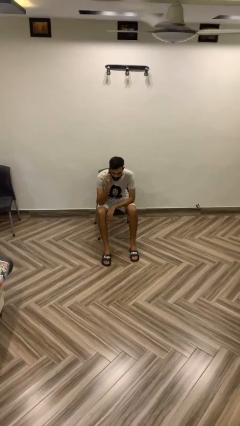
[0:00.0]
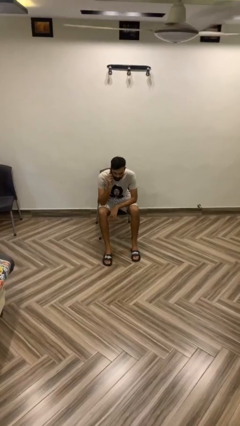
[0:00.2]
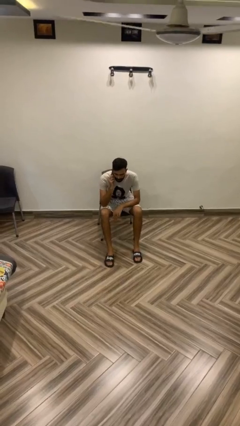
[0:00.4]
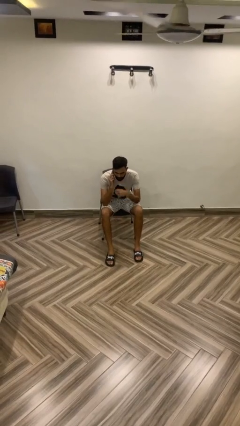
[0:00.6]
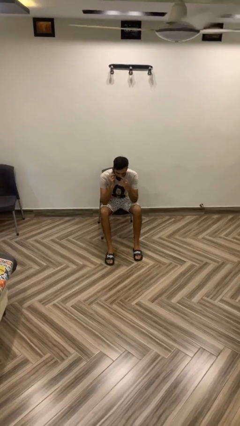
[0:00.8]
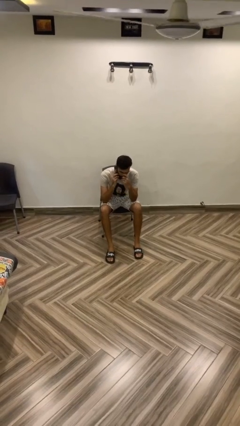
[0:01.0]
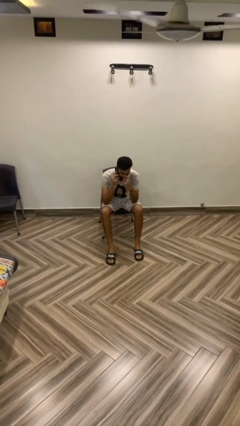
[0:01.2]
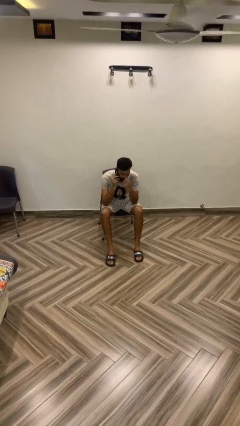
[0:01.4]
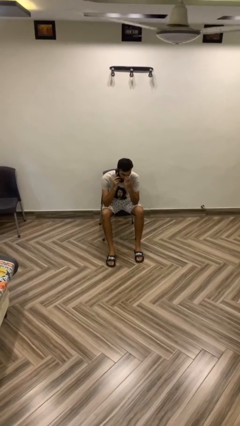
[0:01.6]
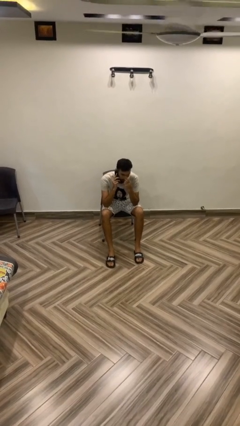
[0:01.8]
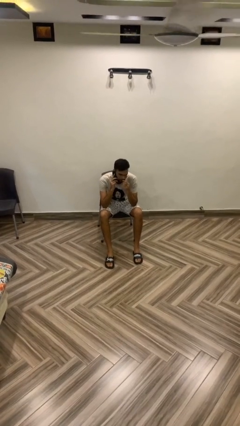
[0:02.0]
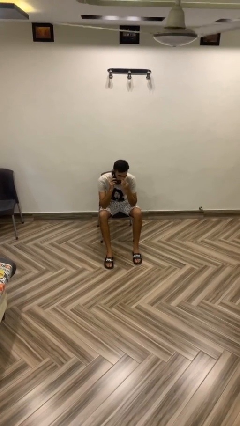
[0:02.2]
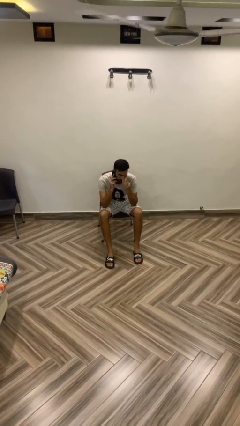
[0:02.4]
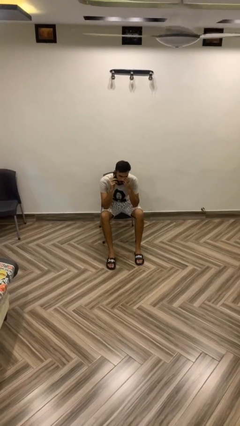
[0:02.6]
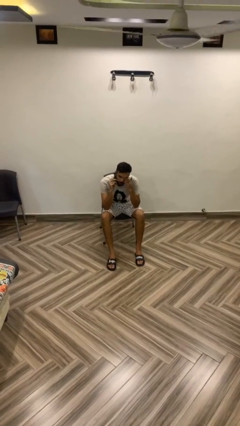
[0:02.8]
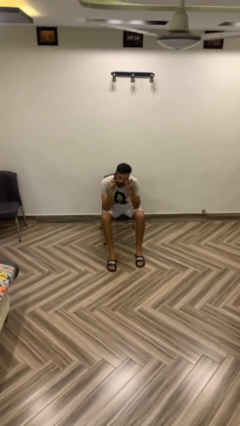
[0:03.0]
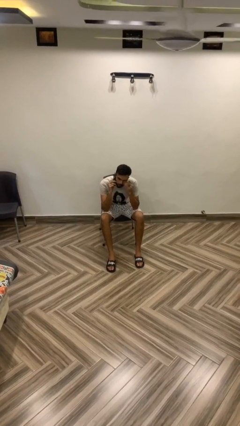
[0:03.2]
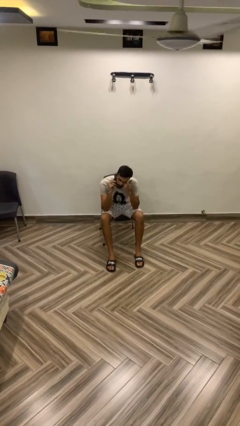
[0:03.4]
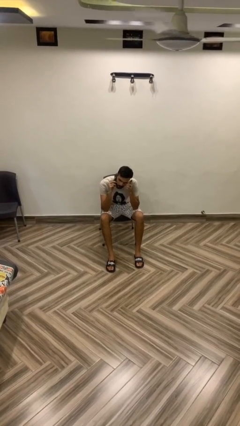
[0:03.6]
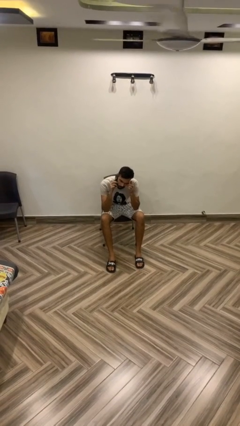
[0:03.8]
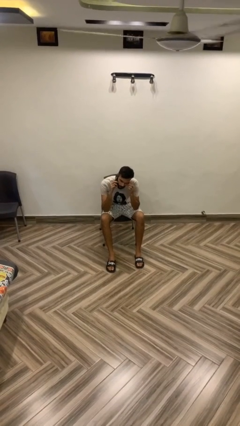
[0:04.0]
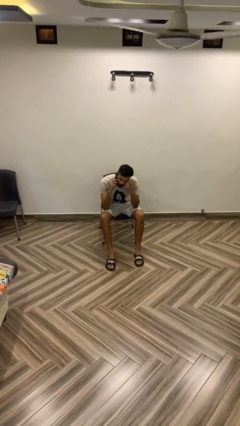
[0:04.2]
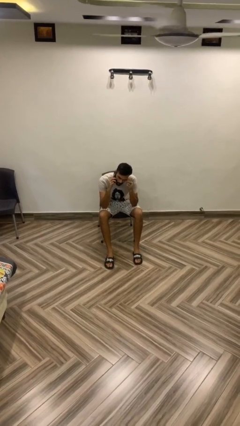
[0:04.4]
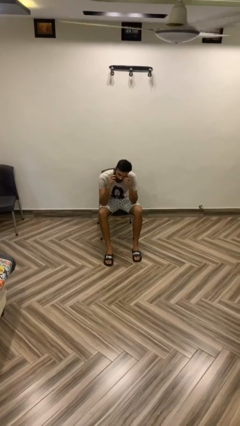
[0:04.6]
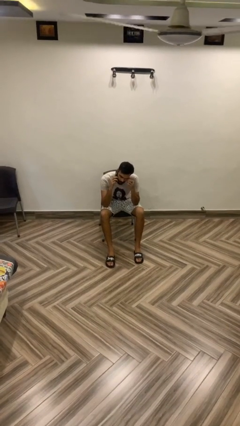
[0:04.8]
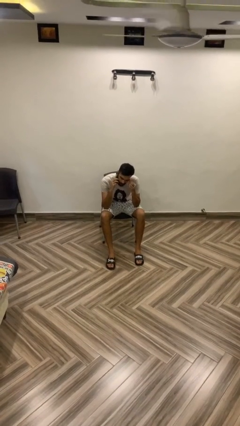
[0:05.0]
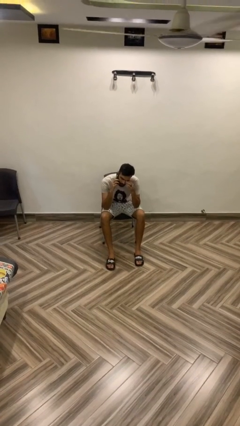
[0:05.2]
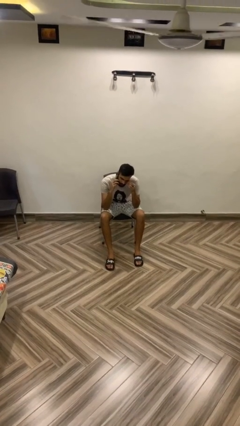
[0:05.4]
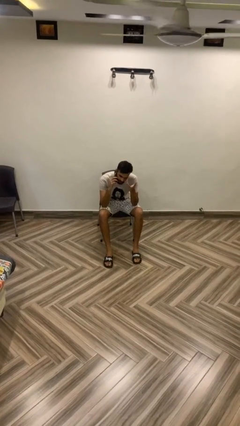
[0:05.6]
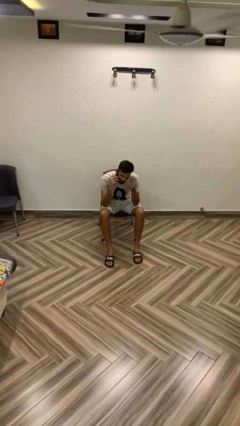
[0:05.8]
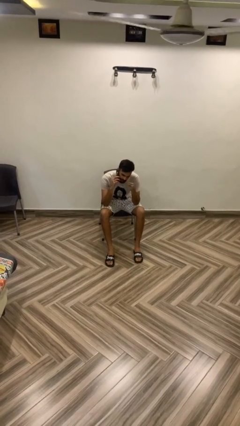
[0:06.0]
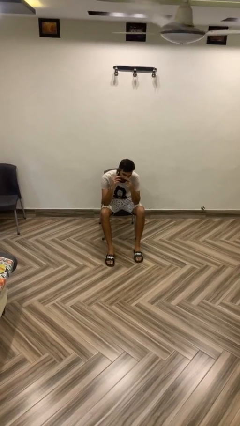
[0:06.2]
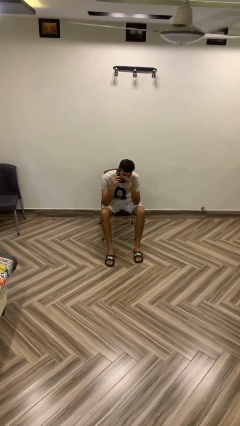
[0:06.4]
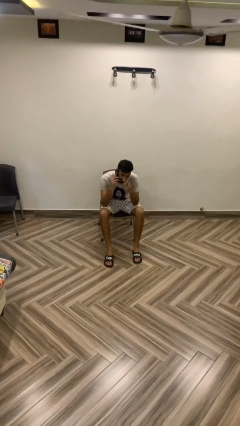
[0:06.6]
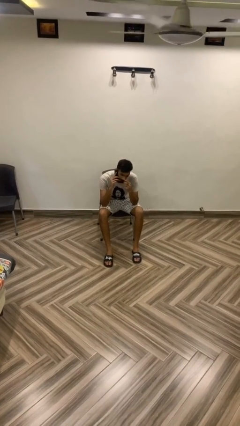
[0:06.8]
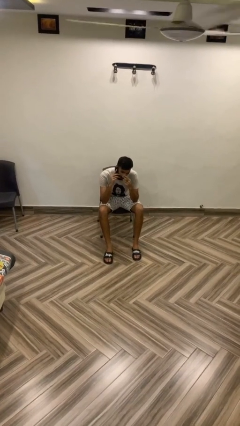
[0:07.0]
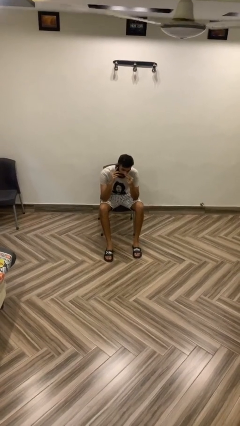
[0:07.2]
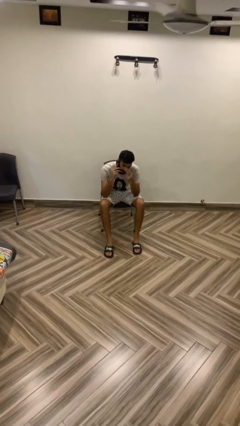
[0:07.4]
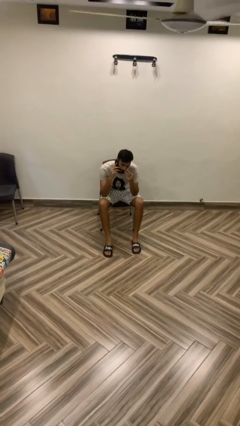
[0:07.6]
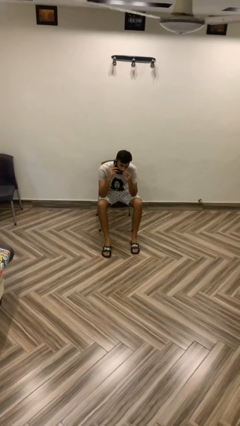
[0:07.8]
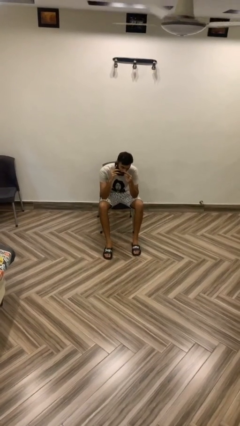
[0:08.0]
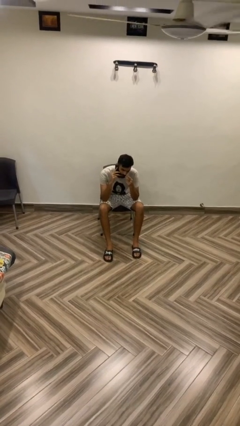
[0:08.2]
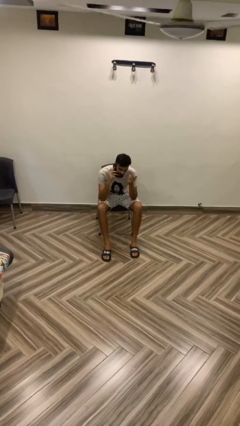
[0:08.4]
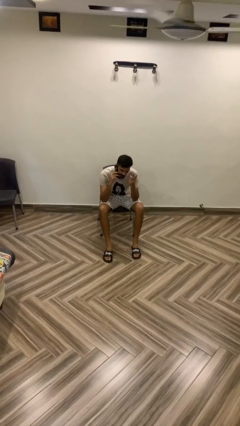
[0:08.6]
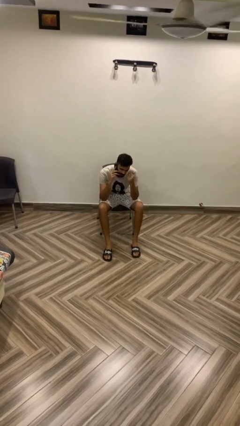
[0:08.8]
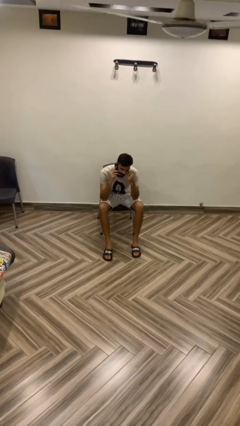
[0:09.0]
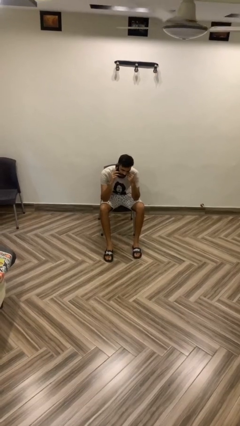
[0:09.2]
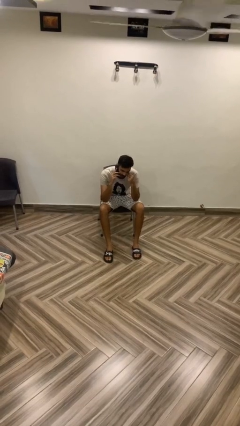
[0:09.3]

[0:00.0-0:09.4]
person talks on phone

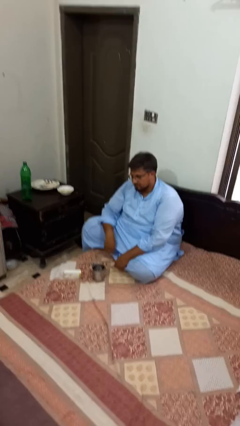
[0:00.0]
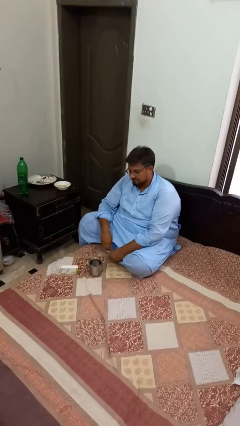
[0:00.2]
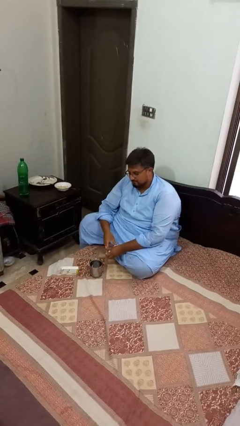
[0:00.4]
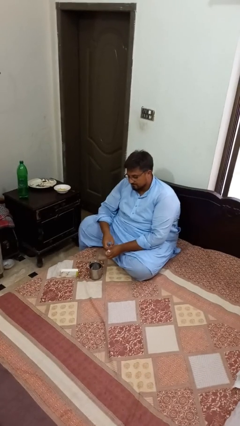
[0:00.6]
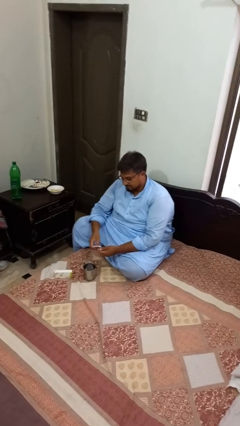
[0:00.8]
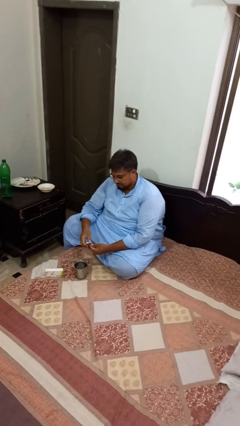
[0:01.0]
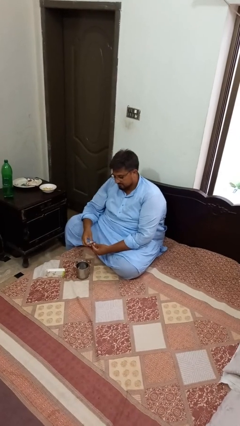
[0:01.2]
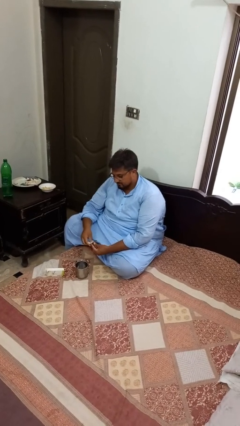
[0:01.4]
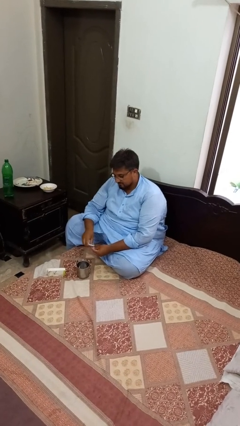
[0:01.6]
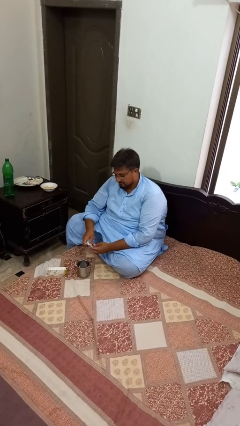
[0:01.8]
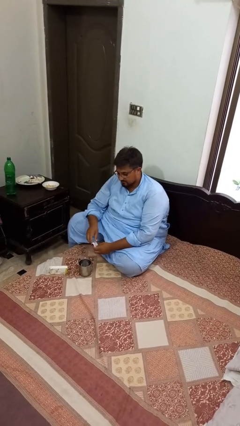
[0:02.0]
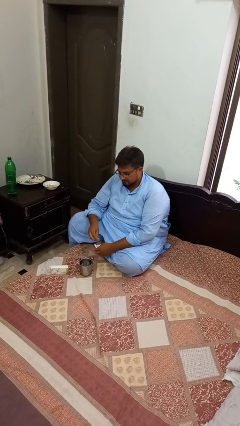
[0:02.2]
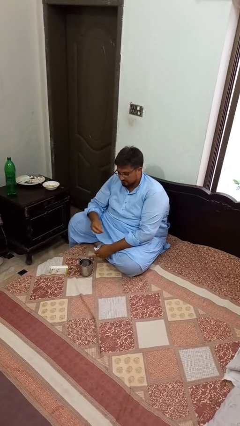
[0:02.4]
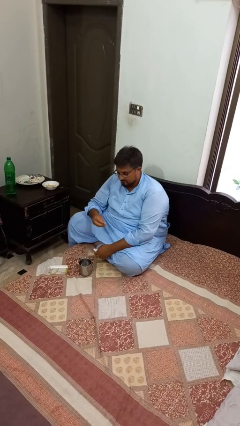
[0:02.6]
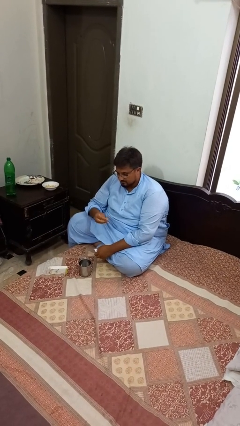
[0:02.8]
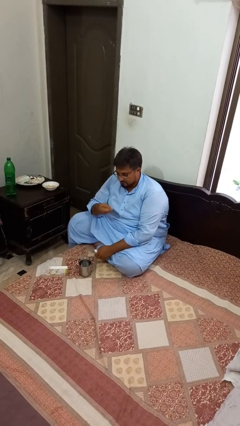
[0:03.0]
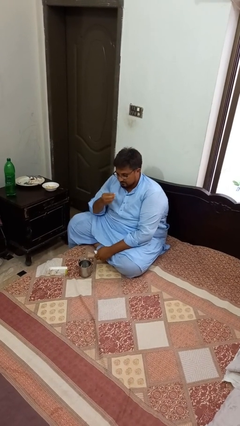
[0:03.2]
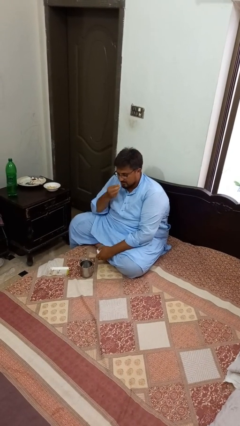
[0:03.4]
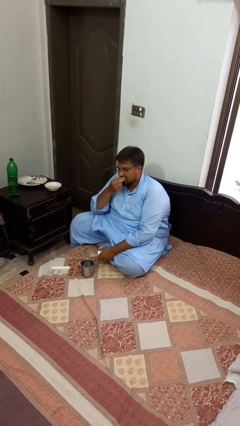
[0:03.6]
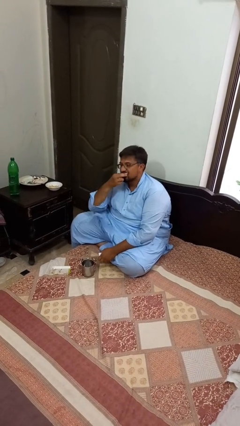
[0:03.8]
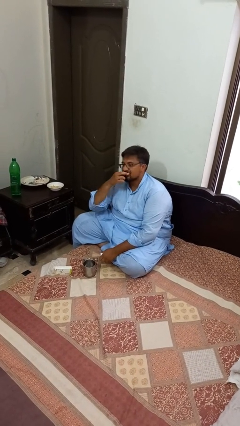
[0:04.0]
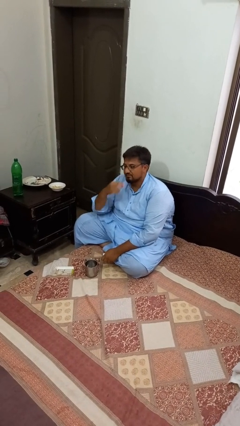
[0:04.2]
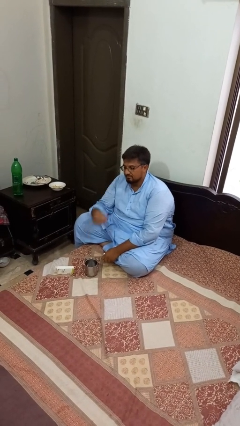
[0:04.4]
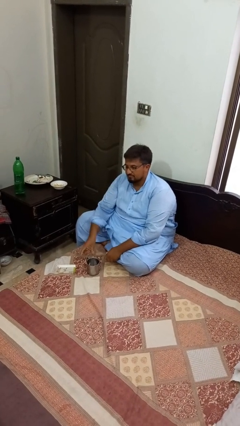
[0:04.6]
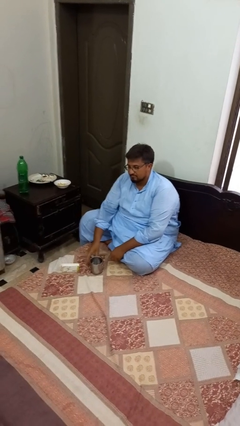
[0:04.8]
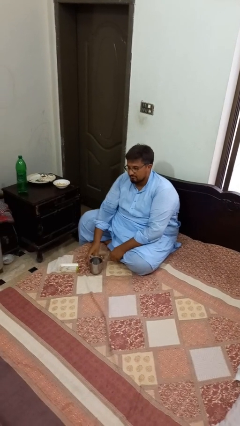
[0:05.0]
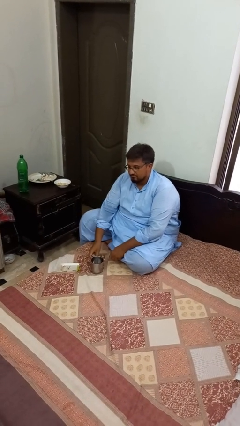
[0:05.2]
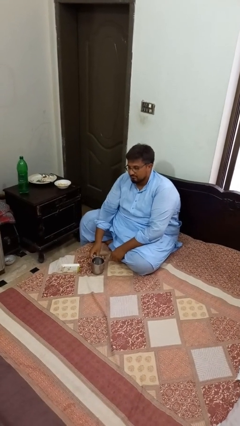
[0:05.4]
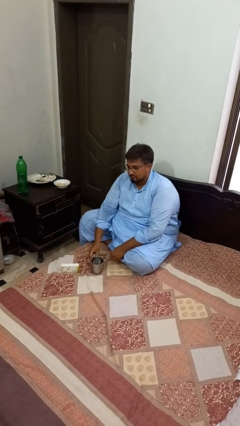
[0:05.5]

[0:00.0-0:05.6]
person takes medicine pills

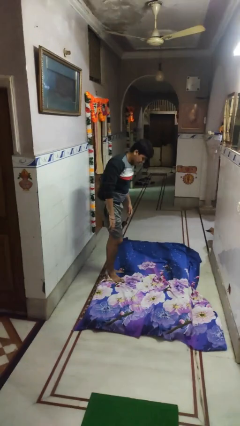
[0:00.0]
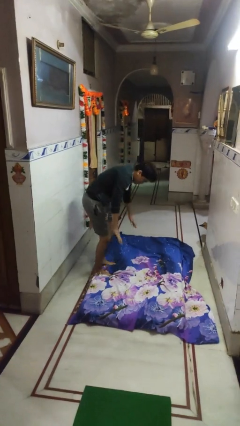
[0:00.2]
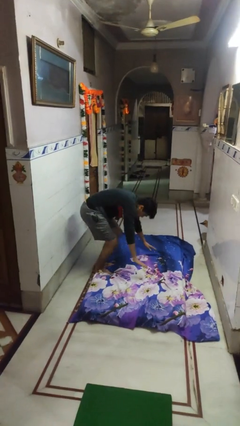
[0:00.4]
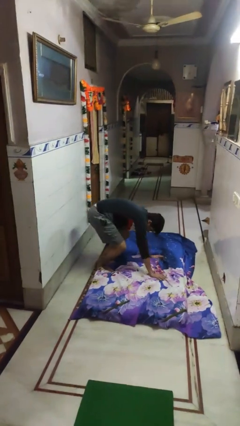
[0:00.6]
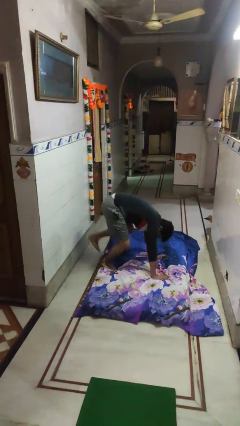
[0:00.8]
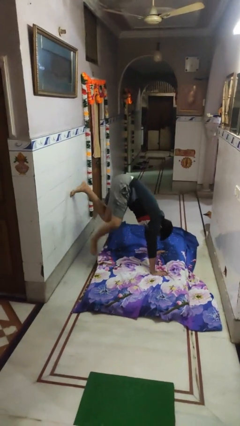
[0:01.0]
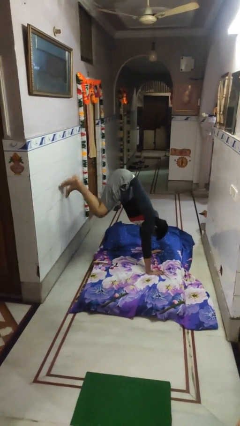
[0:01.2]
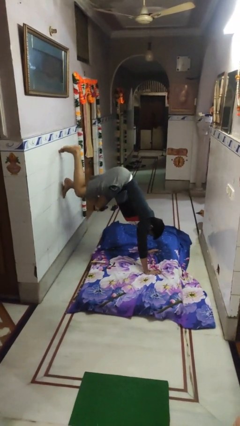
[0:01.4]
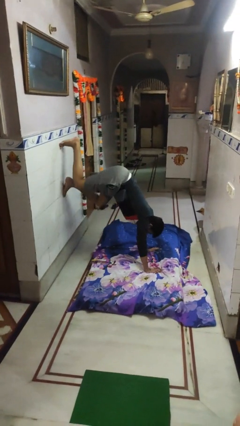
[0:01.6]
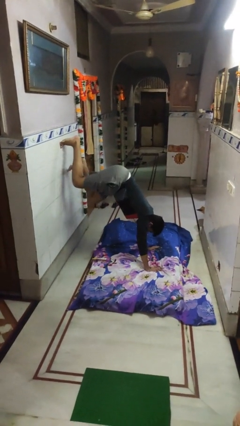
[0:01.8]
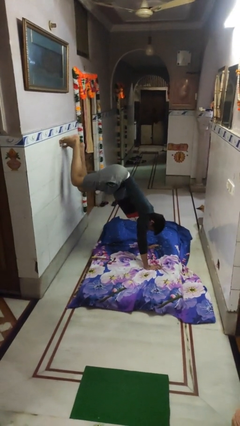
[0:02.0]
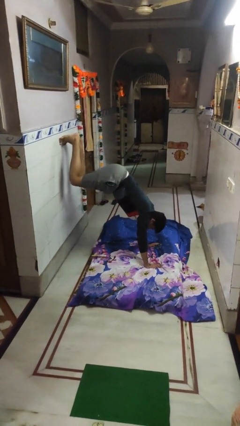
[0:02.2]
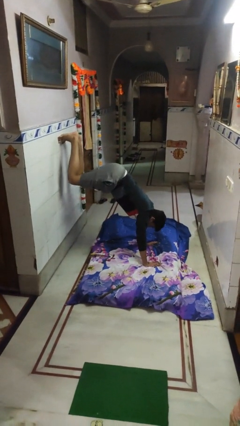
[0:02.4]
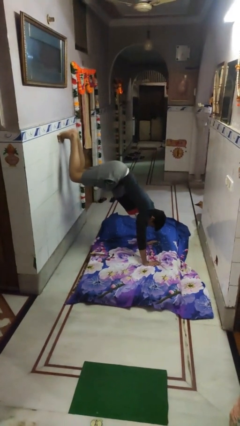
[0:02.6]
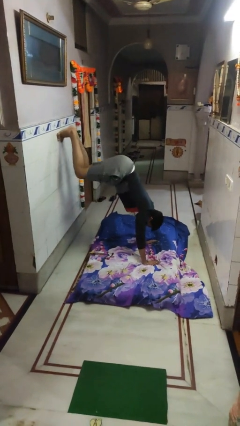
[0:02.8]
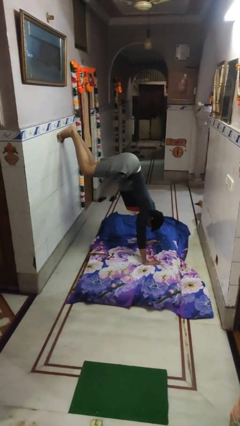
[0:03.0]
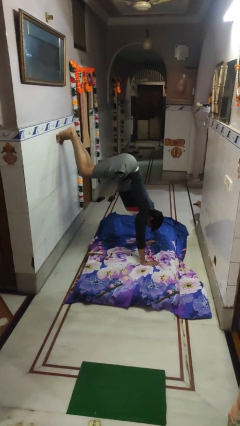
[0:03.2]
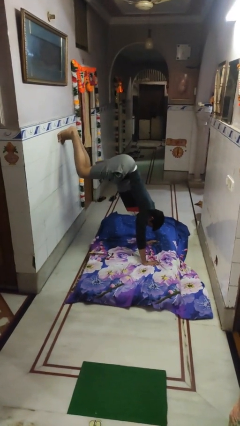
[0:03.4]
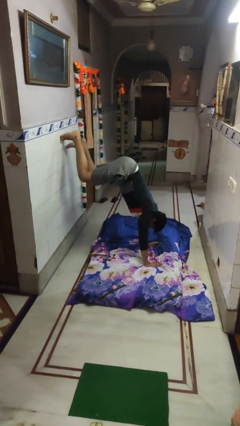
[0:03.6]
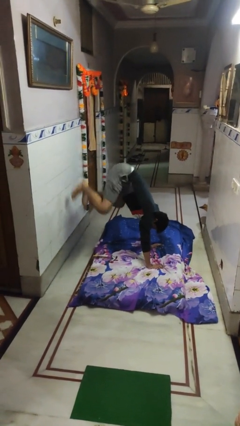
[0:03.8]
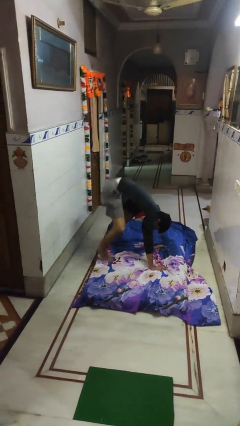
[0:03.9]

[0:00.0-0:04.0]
person handstand
